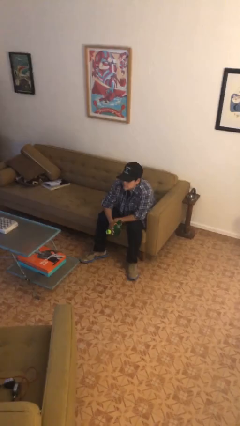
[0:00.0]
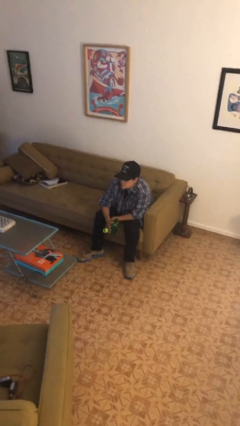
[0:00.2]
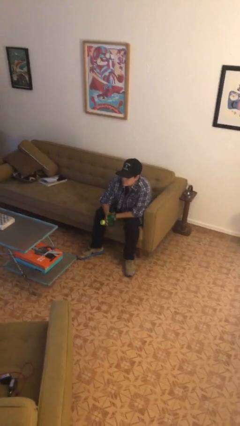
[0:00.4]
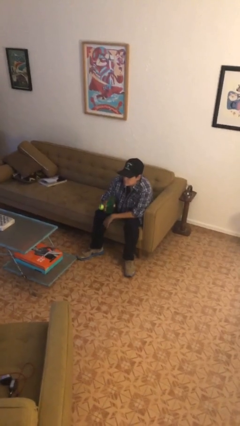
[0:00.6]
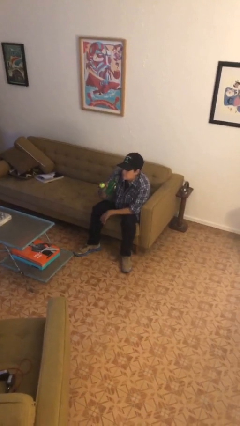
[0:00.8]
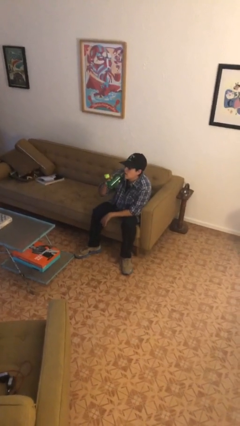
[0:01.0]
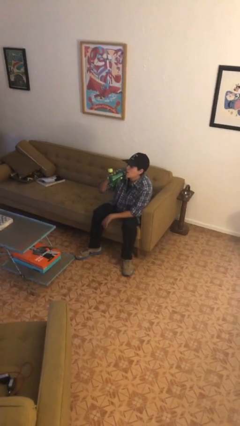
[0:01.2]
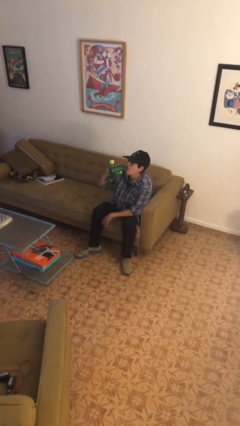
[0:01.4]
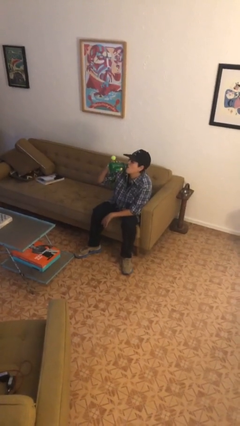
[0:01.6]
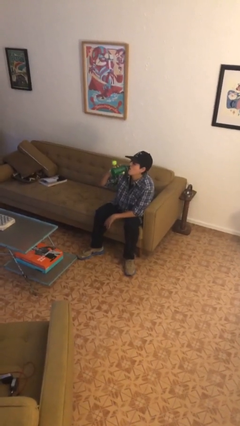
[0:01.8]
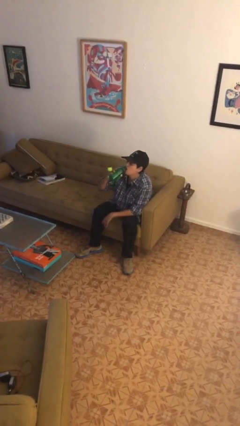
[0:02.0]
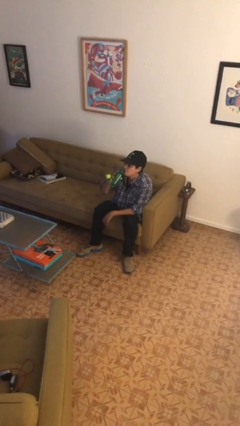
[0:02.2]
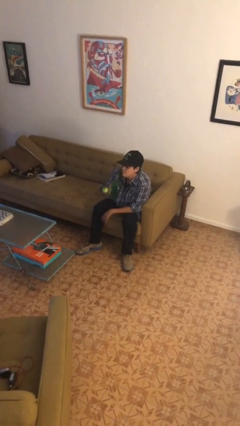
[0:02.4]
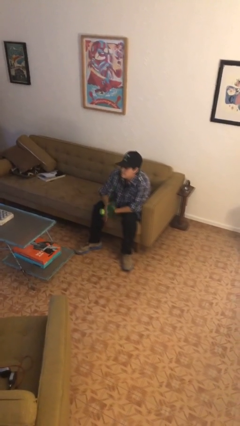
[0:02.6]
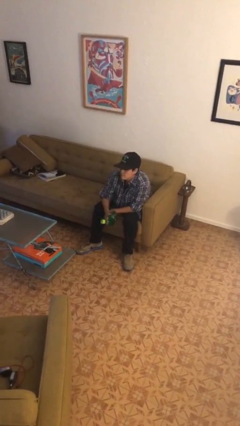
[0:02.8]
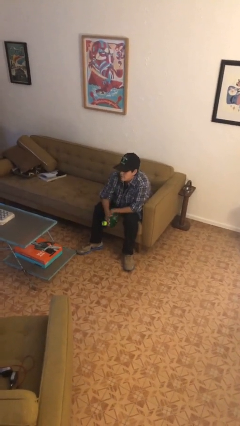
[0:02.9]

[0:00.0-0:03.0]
person drinks from bottle

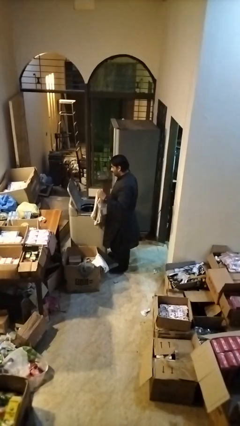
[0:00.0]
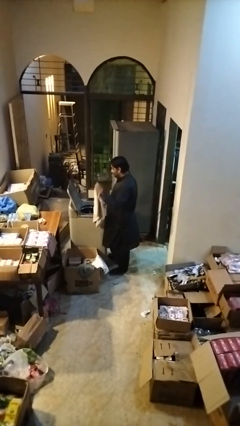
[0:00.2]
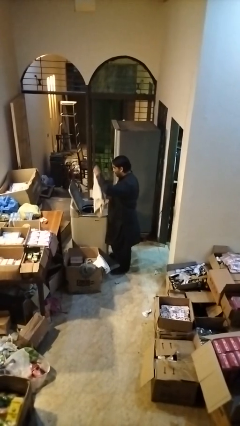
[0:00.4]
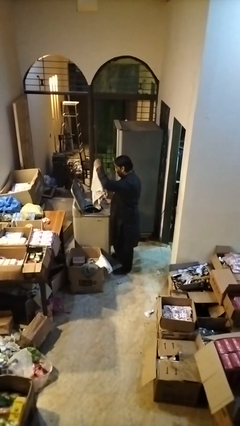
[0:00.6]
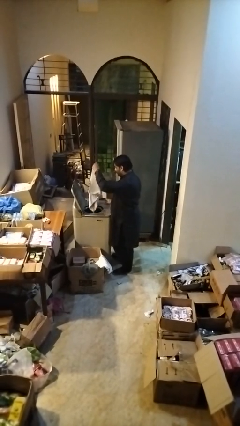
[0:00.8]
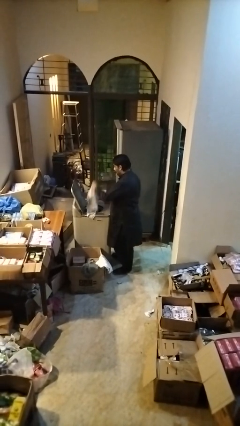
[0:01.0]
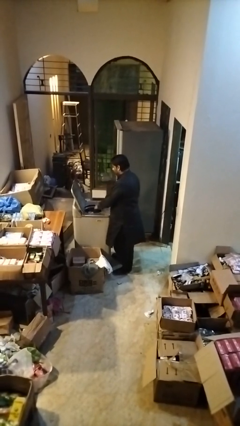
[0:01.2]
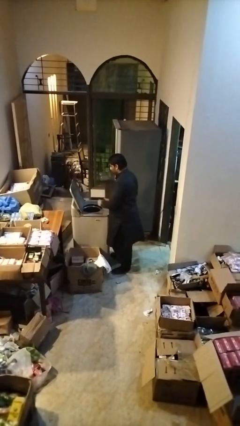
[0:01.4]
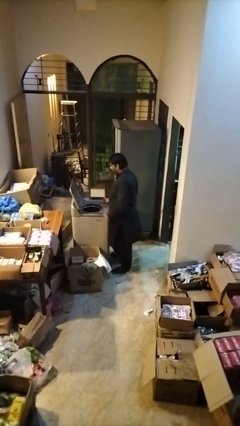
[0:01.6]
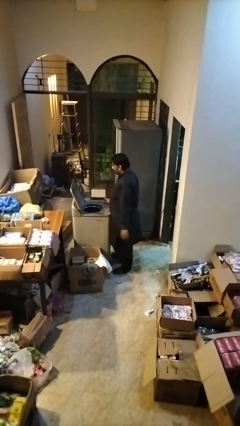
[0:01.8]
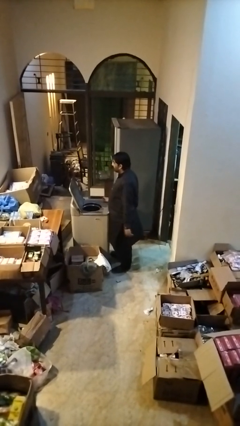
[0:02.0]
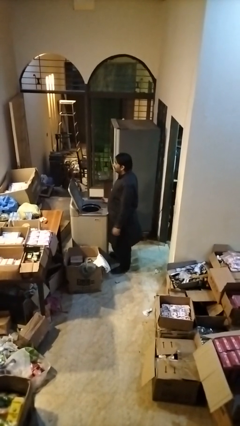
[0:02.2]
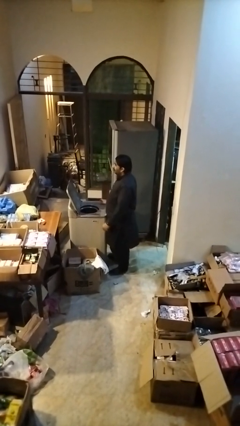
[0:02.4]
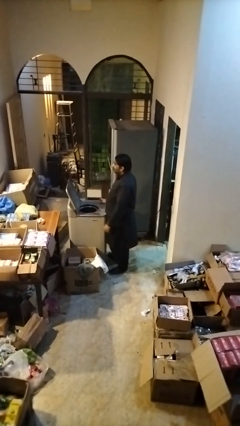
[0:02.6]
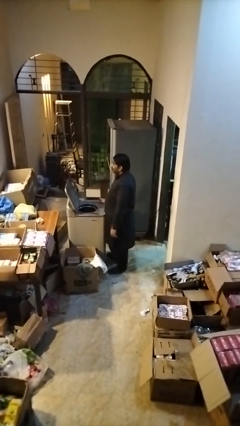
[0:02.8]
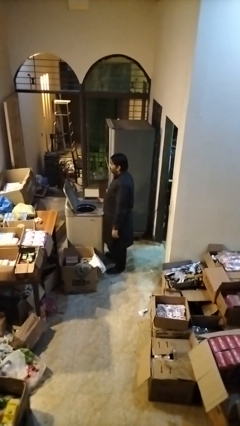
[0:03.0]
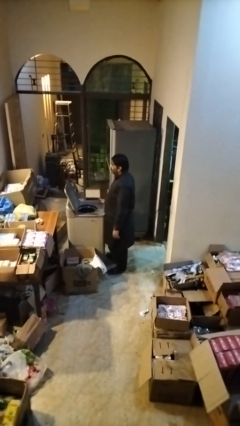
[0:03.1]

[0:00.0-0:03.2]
person loads clotheswasher

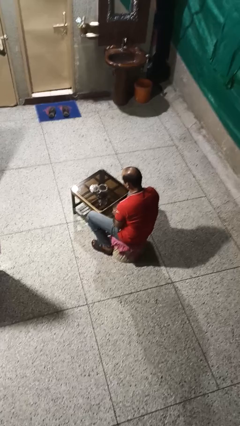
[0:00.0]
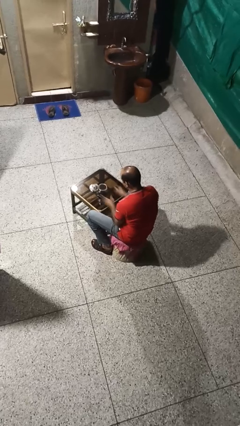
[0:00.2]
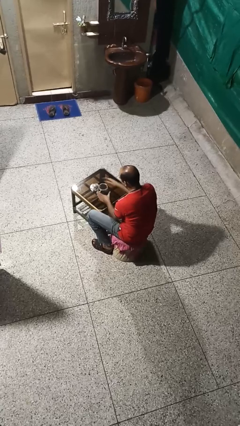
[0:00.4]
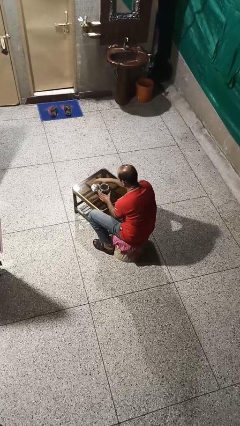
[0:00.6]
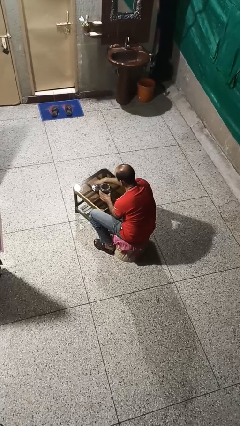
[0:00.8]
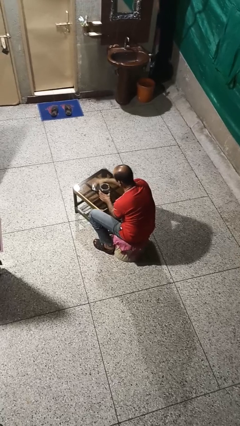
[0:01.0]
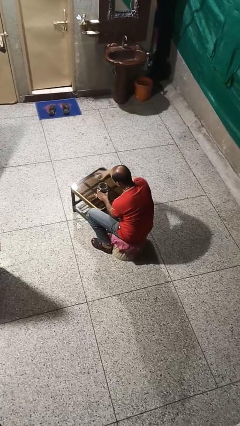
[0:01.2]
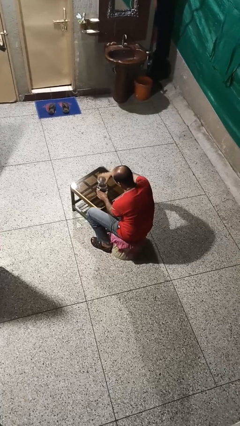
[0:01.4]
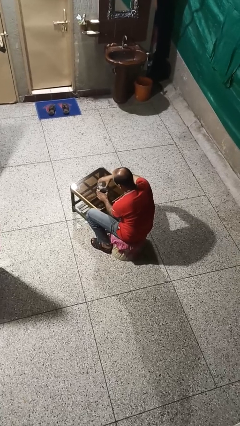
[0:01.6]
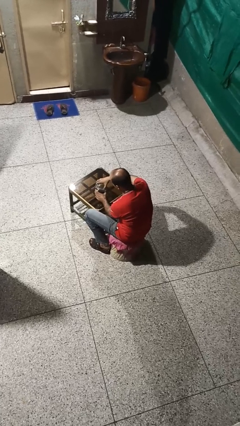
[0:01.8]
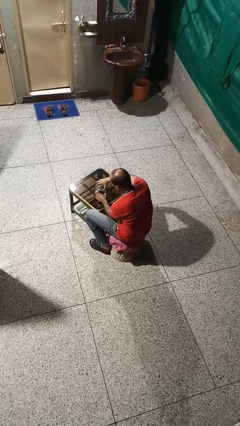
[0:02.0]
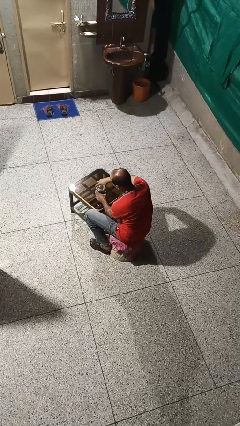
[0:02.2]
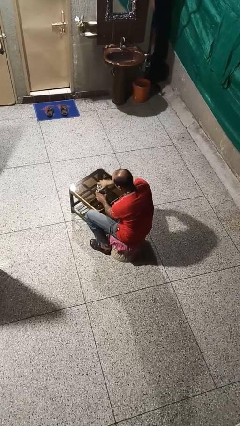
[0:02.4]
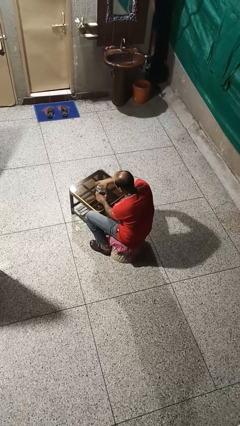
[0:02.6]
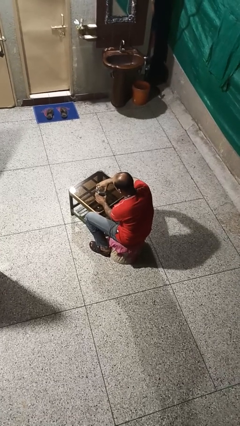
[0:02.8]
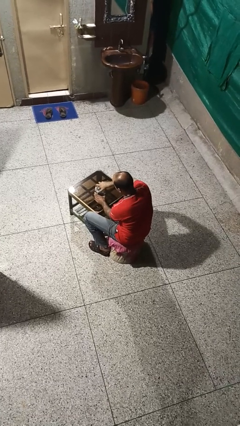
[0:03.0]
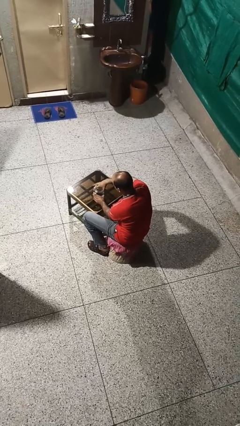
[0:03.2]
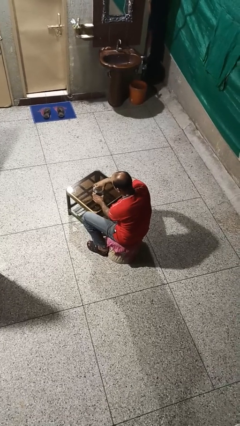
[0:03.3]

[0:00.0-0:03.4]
person closes jar

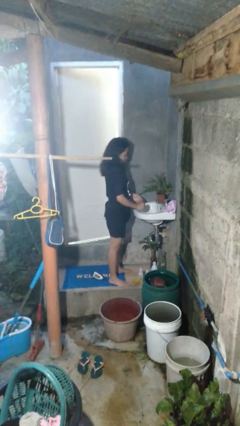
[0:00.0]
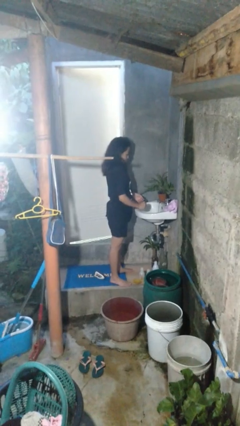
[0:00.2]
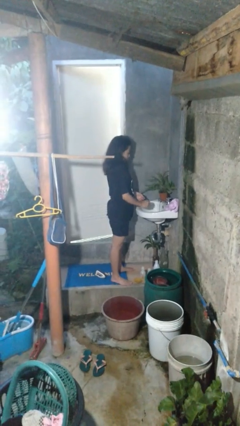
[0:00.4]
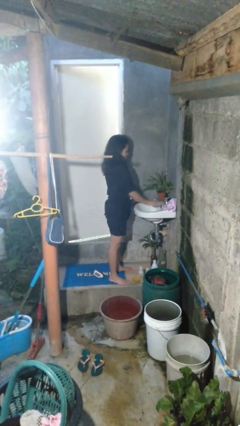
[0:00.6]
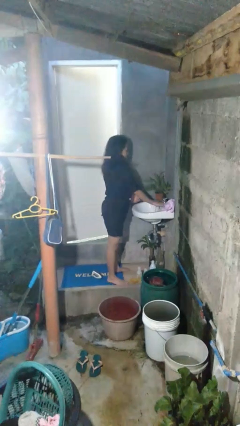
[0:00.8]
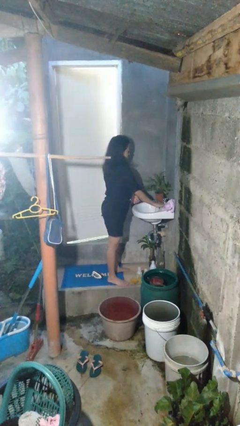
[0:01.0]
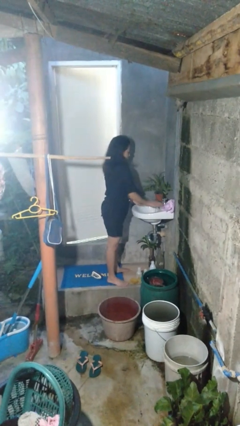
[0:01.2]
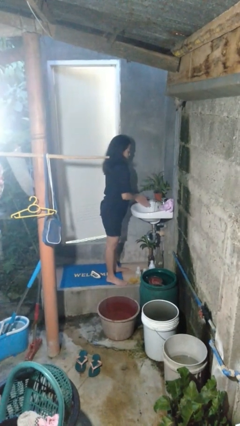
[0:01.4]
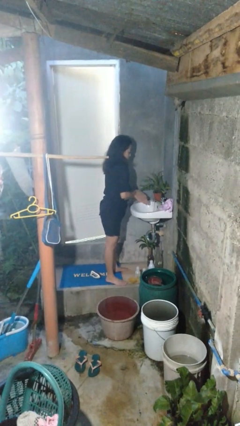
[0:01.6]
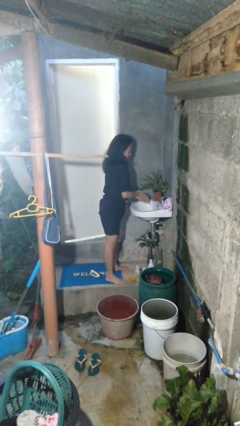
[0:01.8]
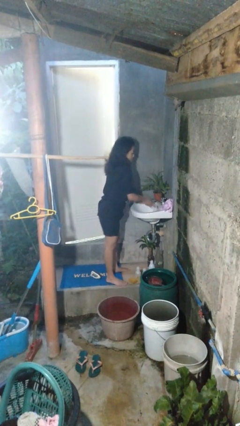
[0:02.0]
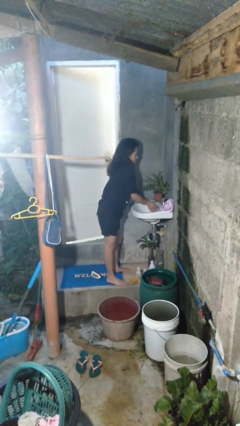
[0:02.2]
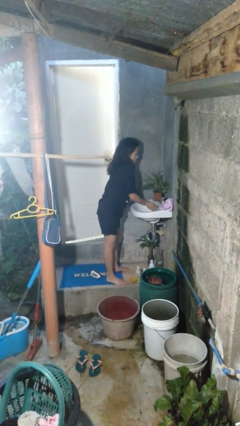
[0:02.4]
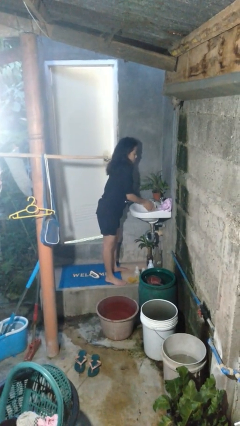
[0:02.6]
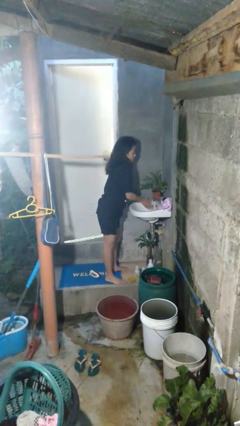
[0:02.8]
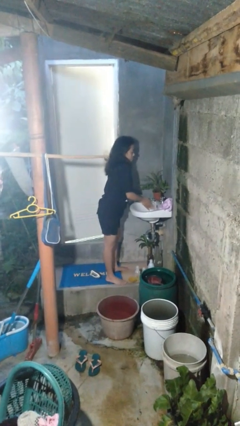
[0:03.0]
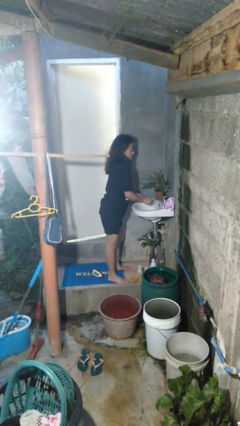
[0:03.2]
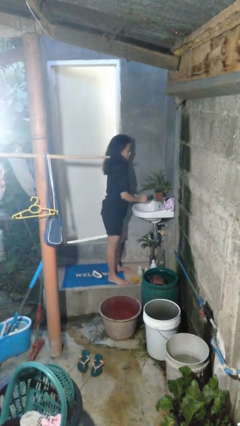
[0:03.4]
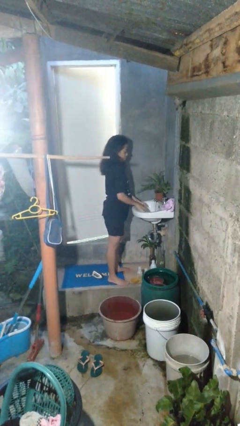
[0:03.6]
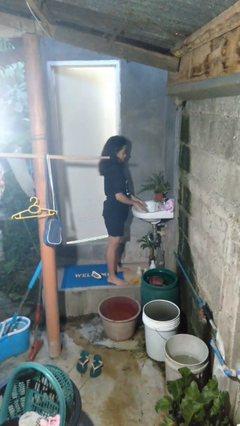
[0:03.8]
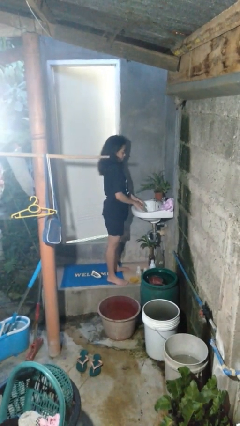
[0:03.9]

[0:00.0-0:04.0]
person washes hands

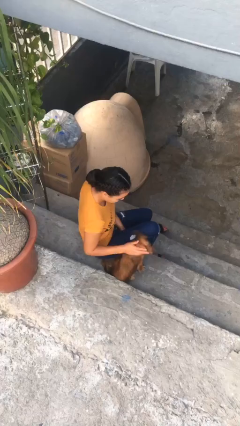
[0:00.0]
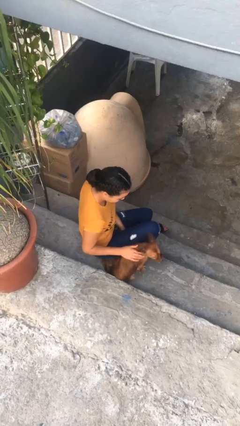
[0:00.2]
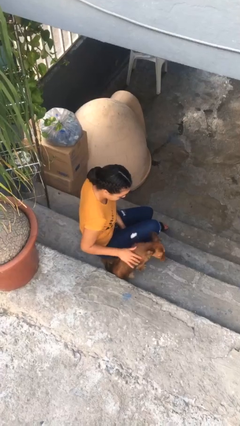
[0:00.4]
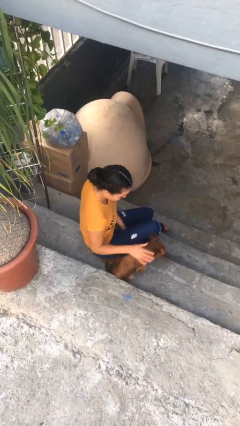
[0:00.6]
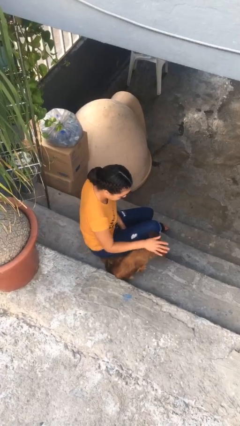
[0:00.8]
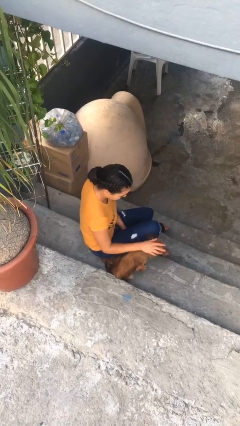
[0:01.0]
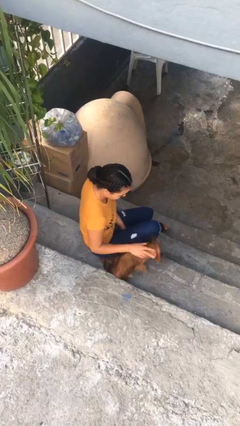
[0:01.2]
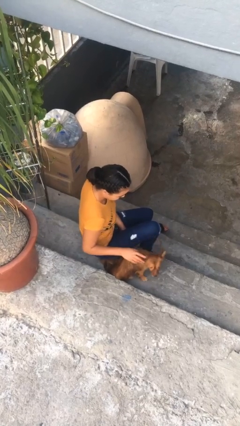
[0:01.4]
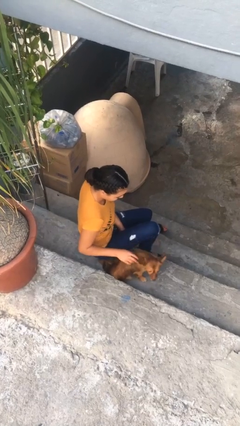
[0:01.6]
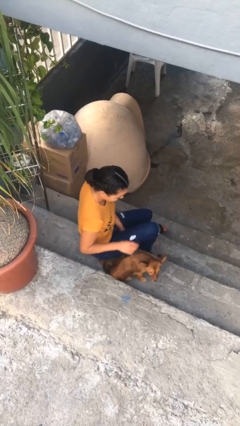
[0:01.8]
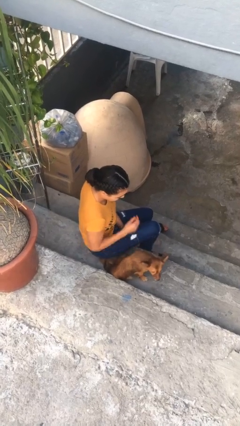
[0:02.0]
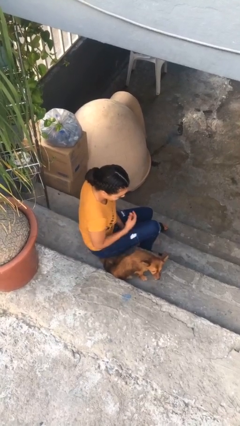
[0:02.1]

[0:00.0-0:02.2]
person pets dog

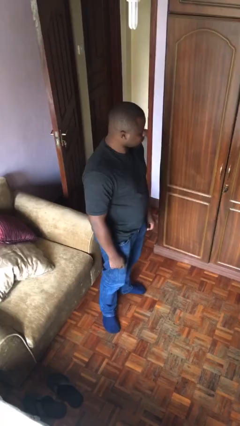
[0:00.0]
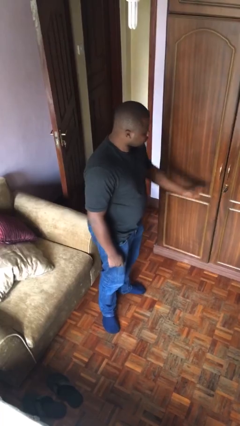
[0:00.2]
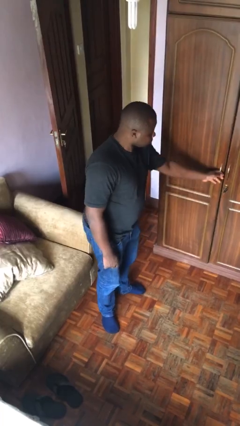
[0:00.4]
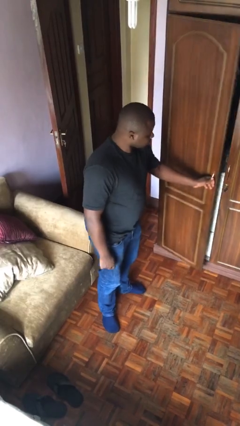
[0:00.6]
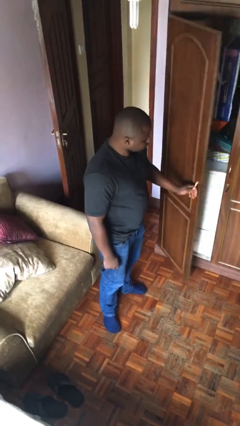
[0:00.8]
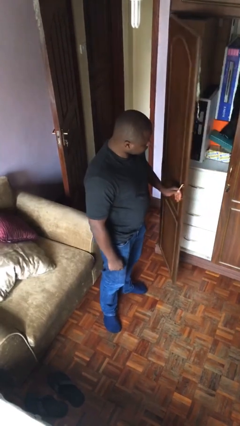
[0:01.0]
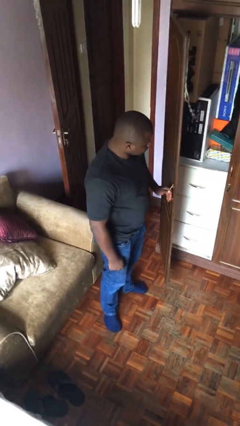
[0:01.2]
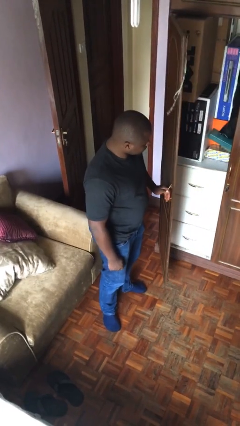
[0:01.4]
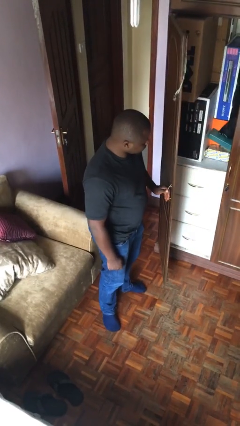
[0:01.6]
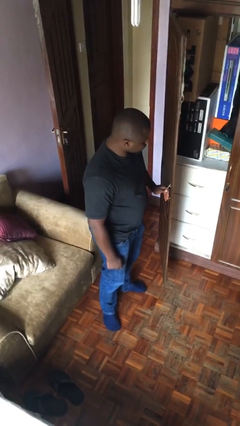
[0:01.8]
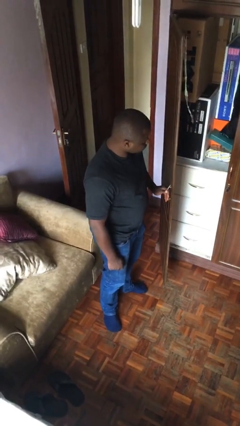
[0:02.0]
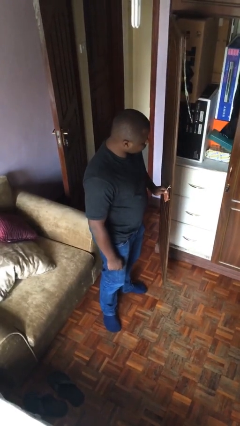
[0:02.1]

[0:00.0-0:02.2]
person opens dresser drawer
